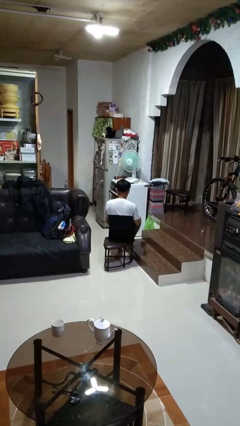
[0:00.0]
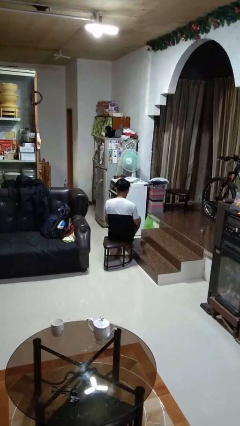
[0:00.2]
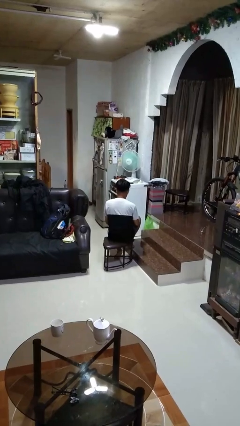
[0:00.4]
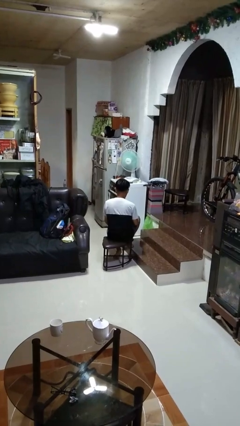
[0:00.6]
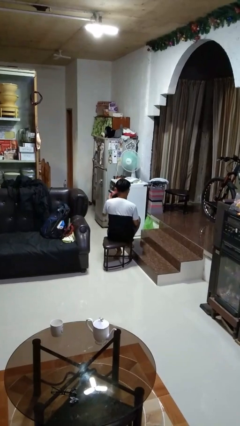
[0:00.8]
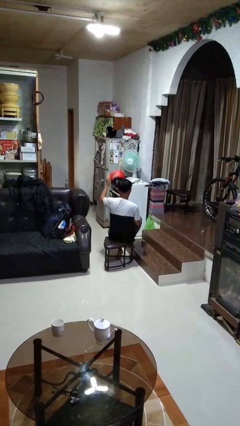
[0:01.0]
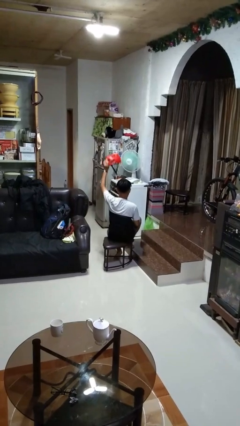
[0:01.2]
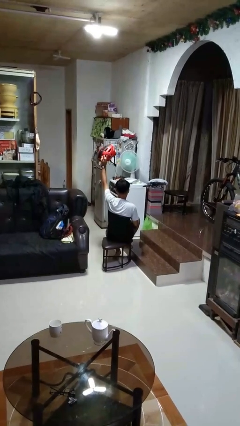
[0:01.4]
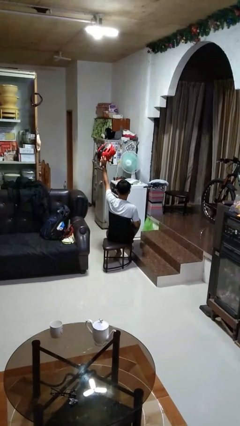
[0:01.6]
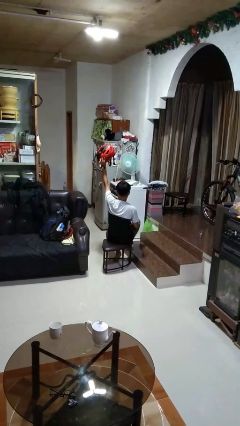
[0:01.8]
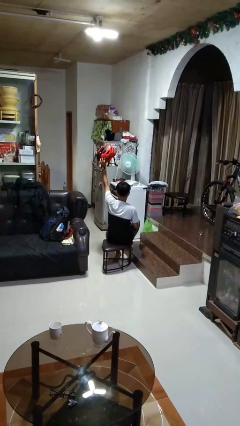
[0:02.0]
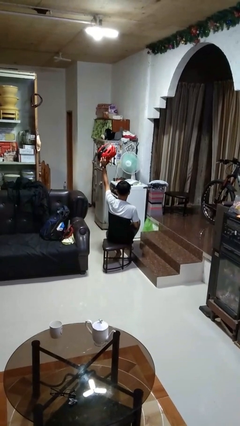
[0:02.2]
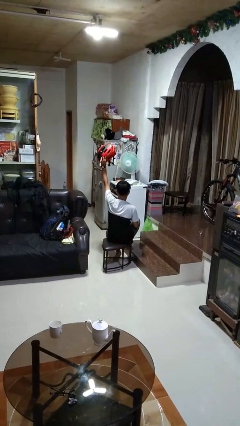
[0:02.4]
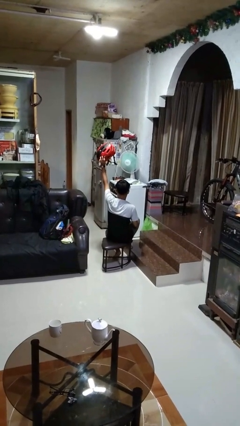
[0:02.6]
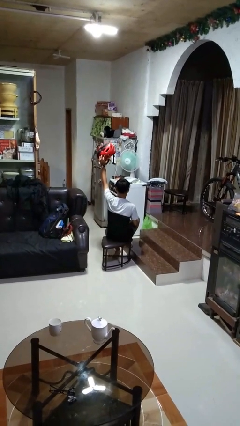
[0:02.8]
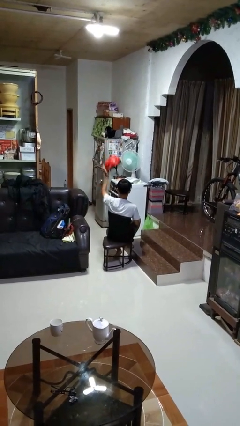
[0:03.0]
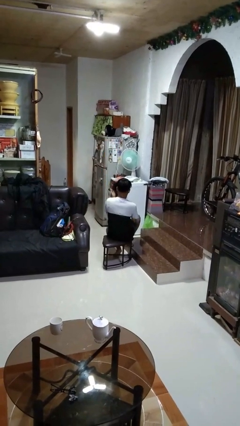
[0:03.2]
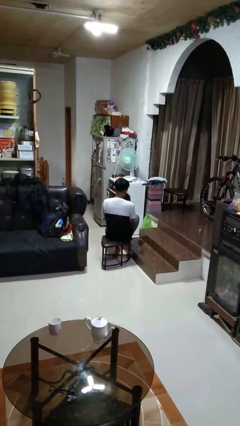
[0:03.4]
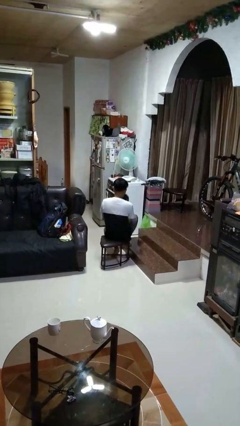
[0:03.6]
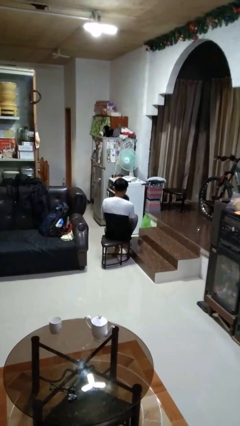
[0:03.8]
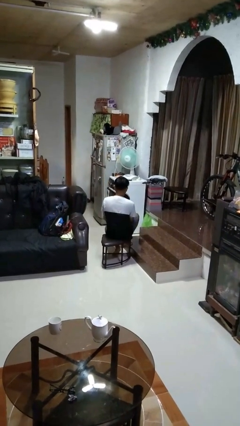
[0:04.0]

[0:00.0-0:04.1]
person holds object above head

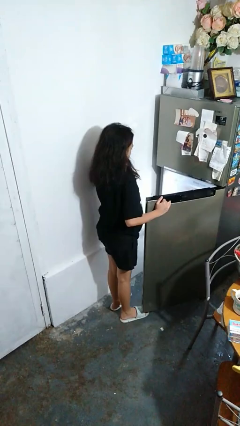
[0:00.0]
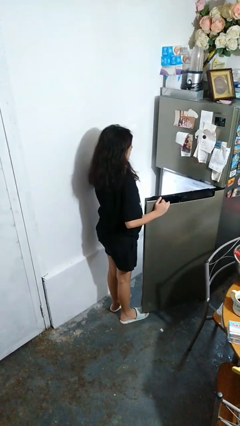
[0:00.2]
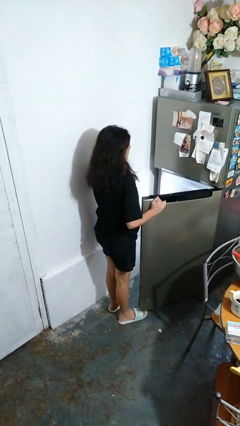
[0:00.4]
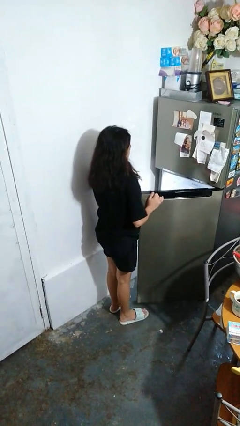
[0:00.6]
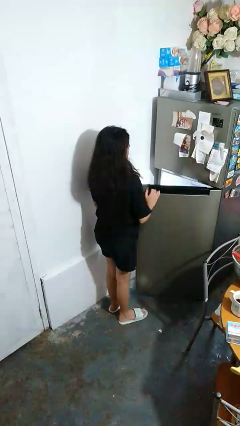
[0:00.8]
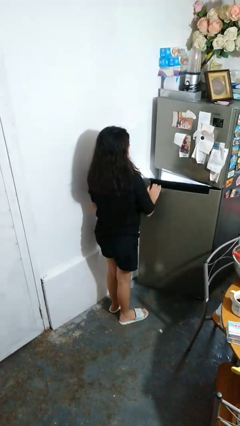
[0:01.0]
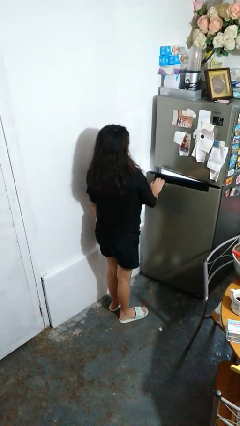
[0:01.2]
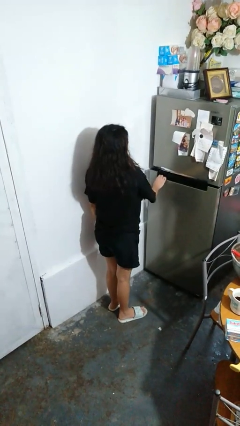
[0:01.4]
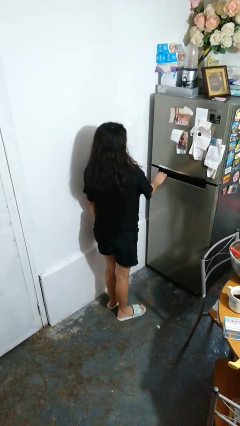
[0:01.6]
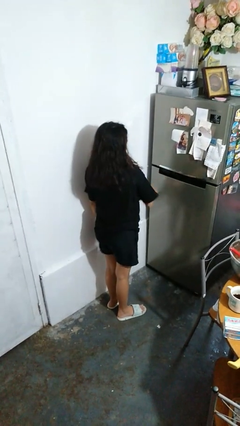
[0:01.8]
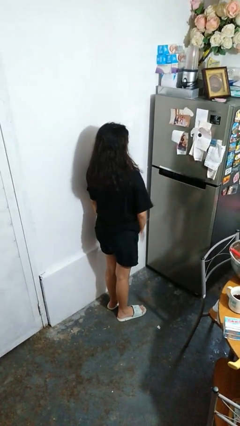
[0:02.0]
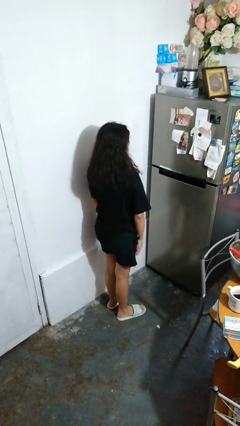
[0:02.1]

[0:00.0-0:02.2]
person closes refrigerator

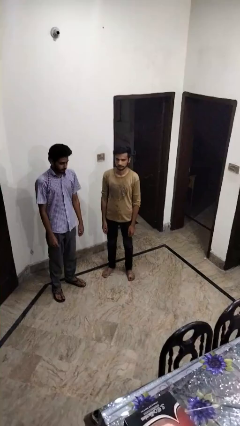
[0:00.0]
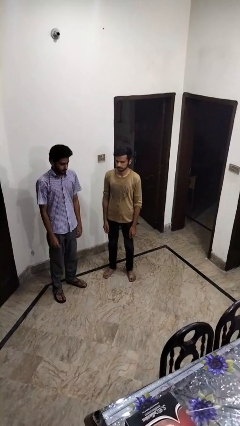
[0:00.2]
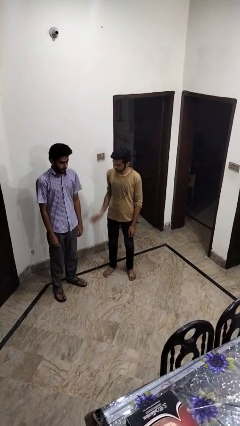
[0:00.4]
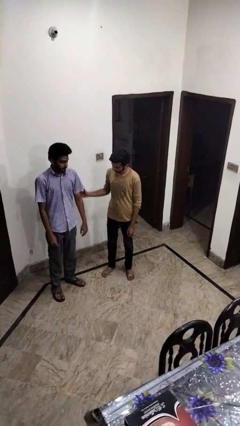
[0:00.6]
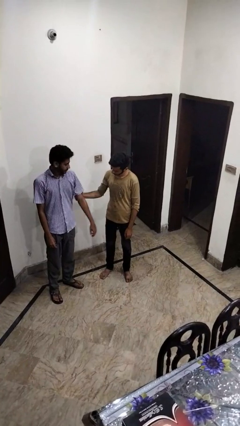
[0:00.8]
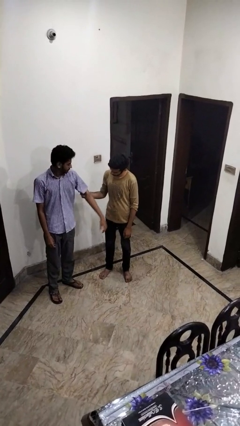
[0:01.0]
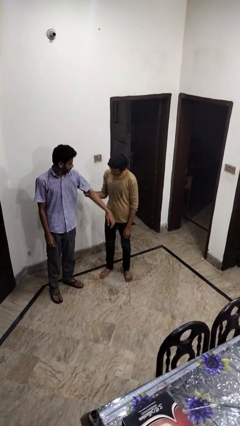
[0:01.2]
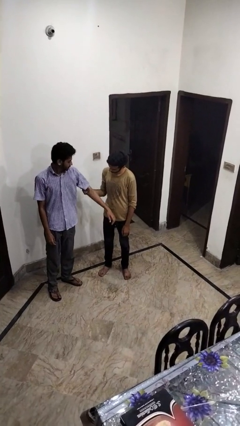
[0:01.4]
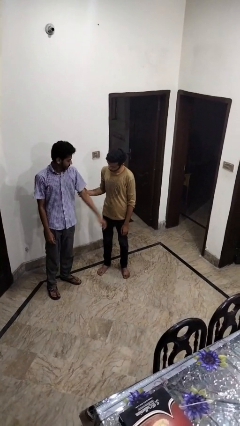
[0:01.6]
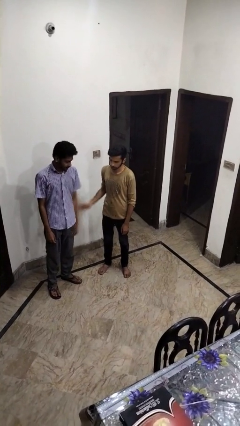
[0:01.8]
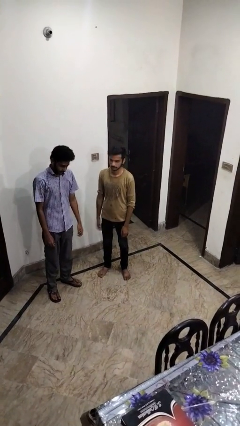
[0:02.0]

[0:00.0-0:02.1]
person grabs person by bicep

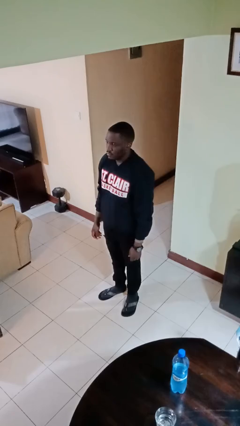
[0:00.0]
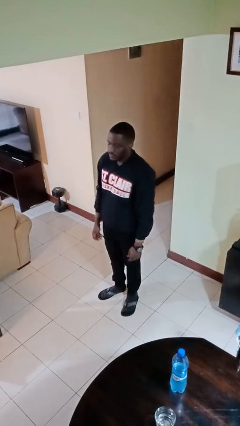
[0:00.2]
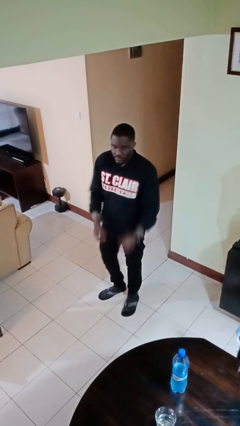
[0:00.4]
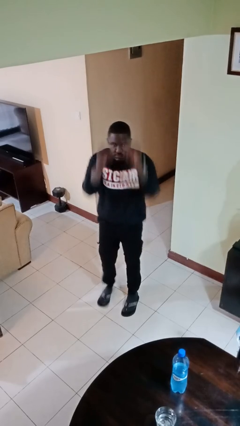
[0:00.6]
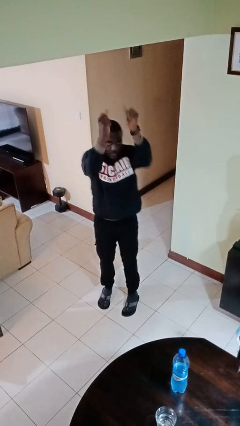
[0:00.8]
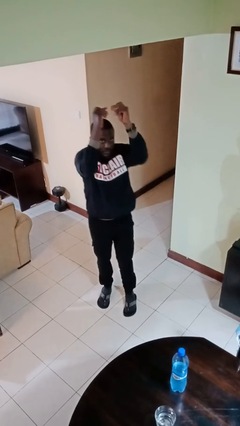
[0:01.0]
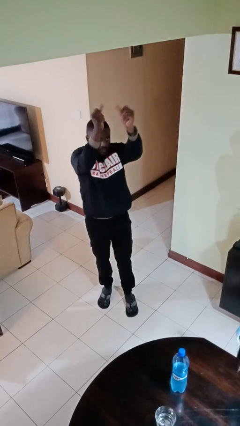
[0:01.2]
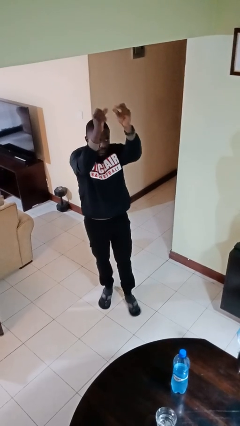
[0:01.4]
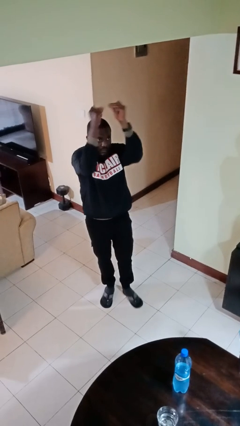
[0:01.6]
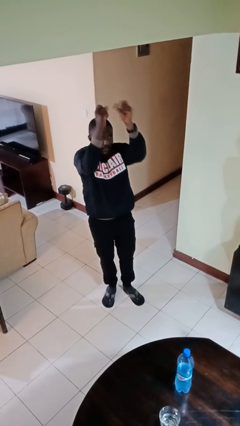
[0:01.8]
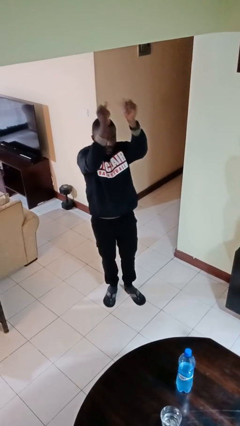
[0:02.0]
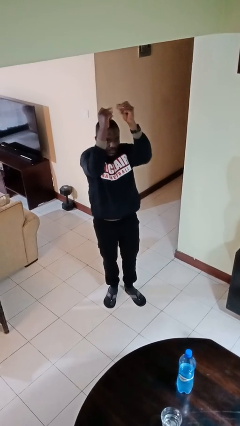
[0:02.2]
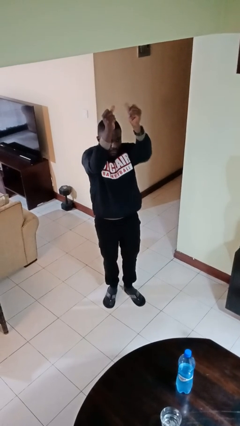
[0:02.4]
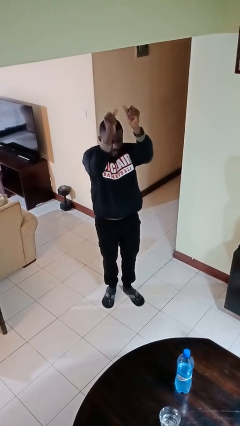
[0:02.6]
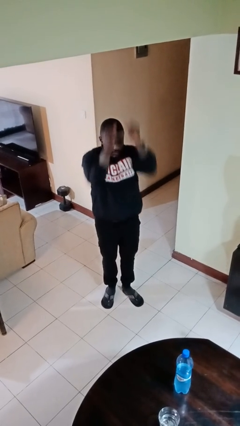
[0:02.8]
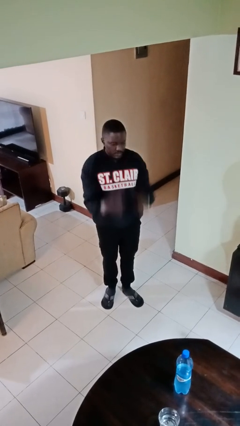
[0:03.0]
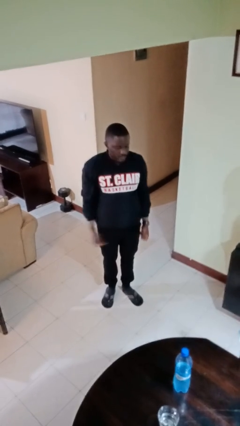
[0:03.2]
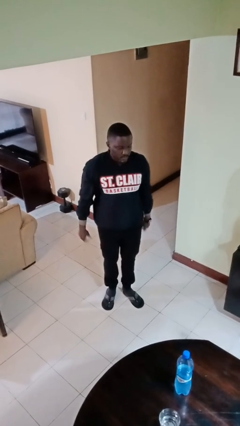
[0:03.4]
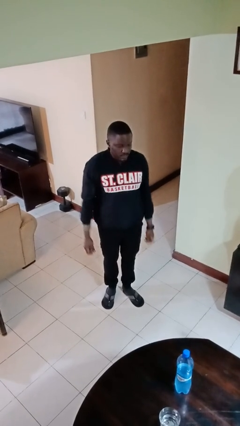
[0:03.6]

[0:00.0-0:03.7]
person snaps fingers

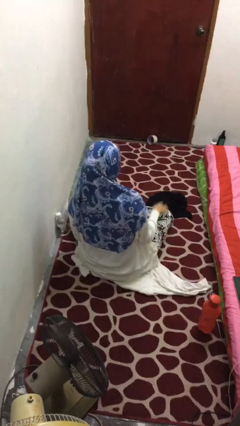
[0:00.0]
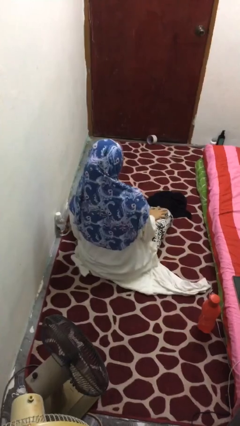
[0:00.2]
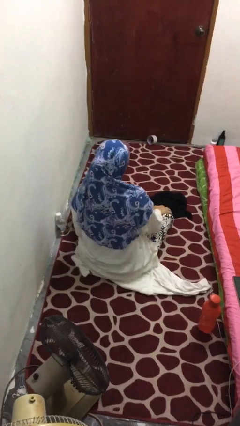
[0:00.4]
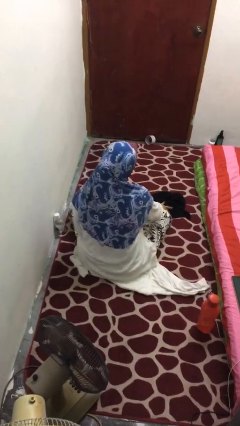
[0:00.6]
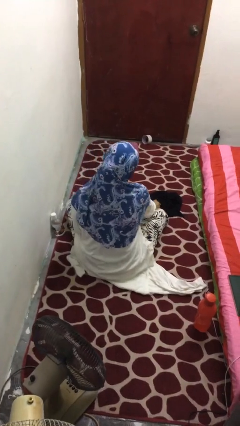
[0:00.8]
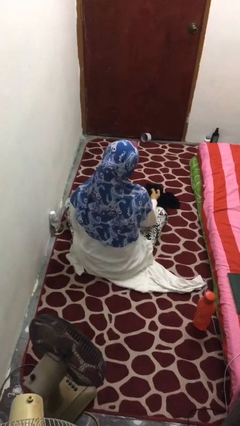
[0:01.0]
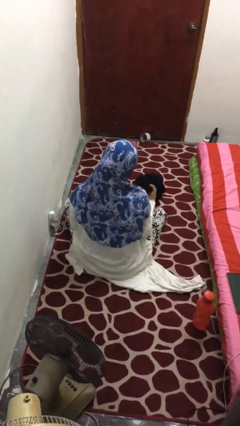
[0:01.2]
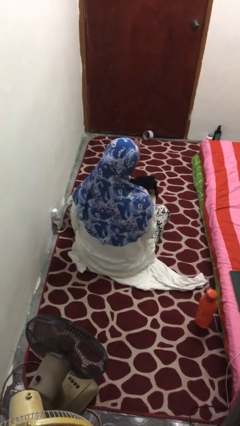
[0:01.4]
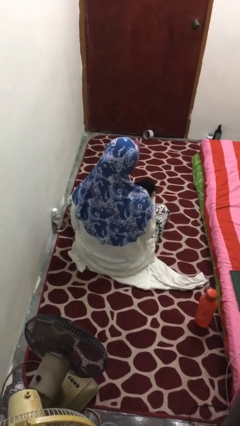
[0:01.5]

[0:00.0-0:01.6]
person picks up object from floor

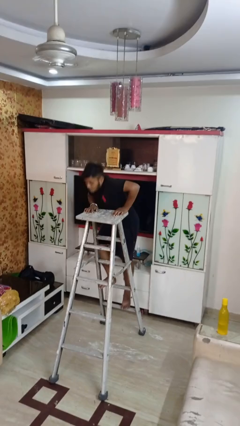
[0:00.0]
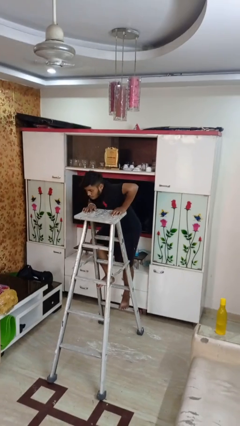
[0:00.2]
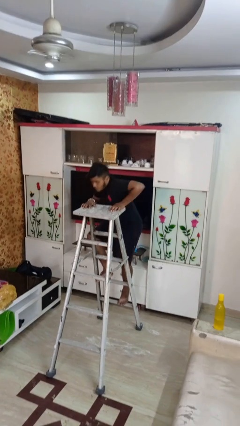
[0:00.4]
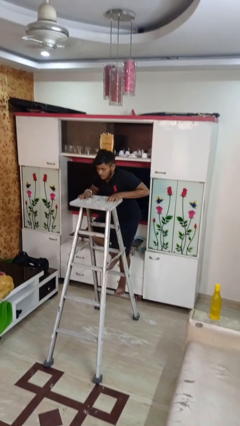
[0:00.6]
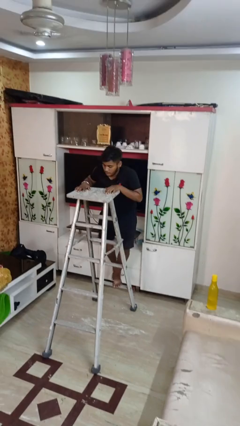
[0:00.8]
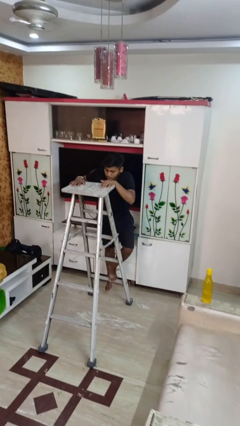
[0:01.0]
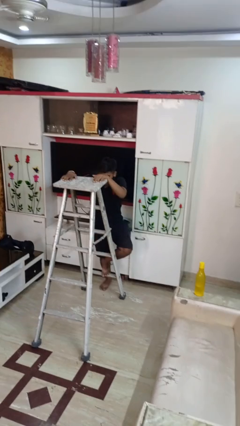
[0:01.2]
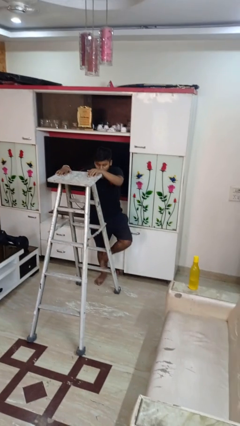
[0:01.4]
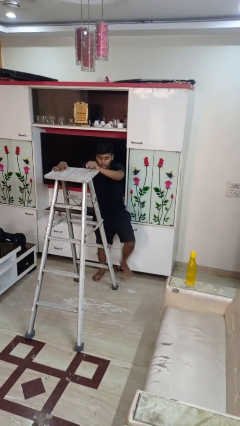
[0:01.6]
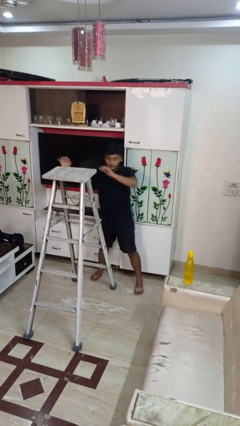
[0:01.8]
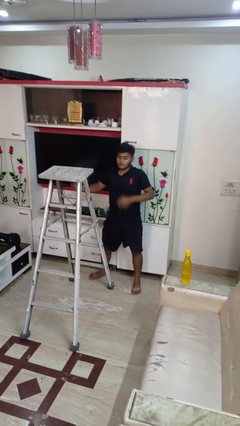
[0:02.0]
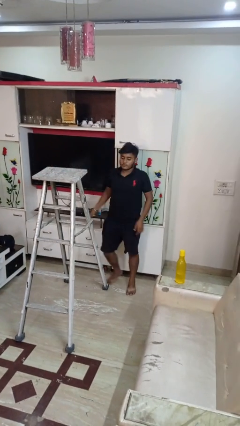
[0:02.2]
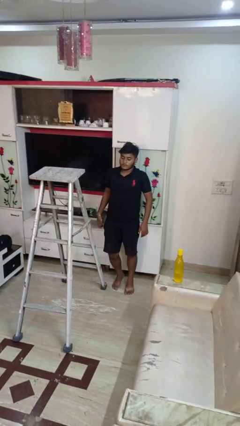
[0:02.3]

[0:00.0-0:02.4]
person climbs down ladder

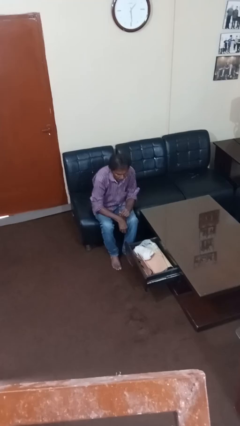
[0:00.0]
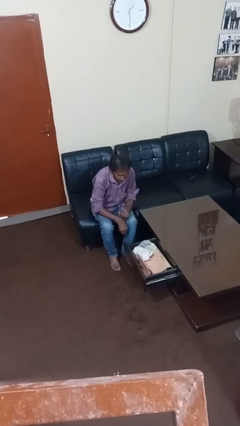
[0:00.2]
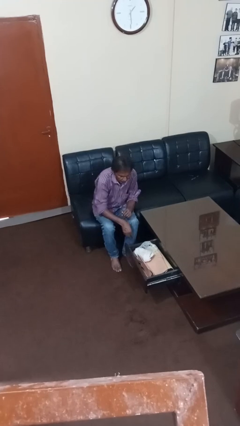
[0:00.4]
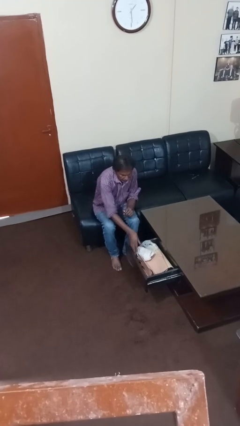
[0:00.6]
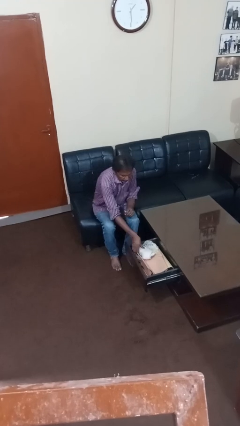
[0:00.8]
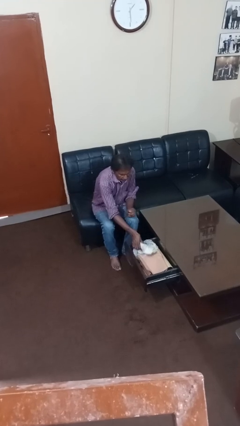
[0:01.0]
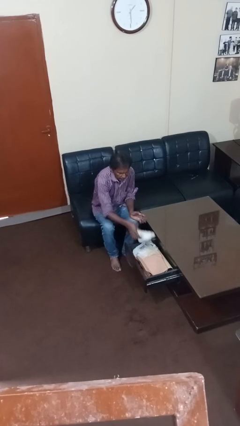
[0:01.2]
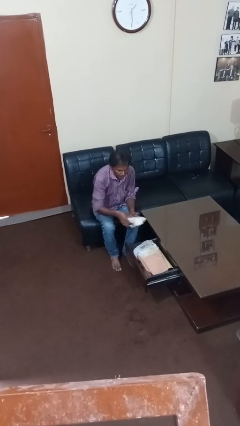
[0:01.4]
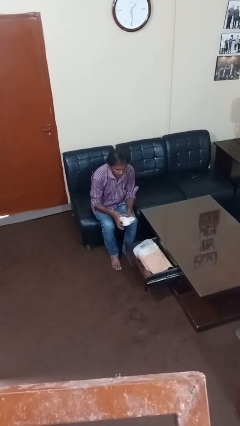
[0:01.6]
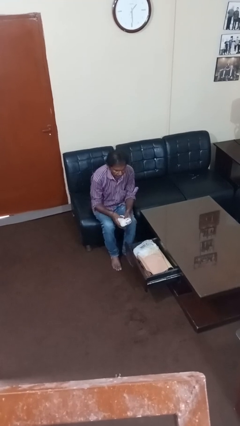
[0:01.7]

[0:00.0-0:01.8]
person takes clothes from dresser
